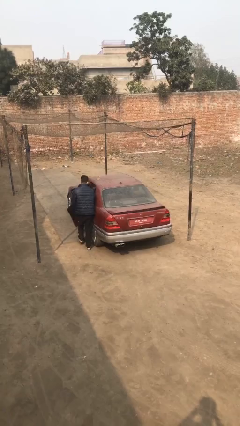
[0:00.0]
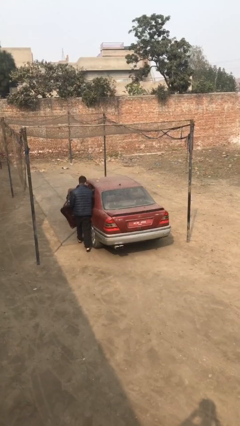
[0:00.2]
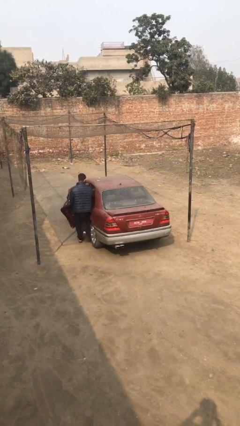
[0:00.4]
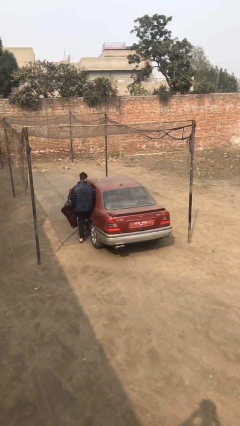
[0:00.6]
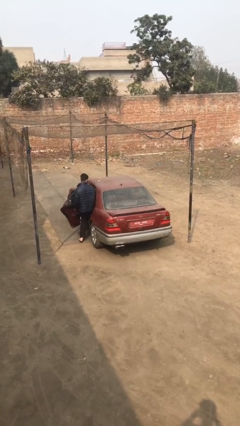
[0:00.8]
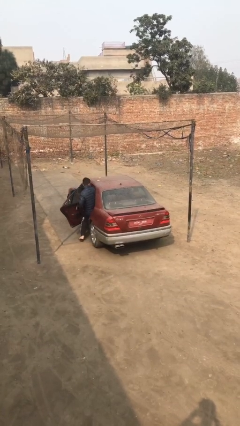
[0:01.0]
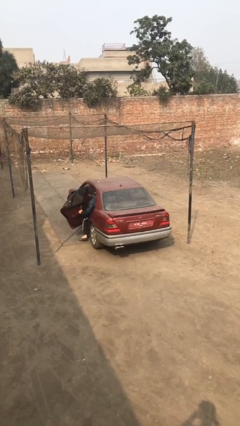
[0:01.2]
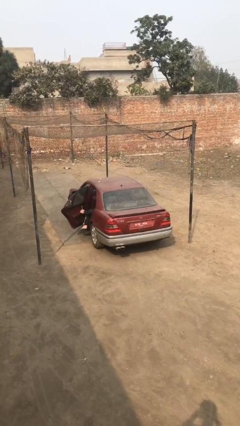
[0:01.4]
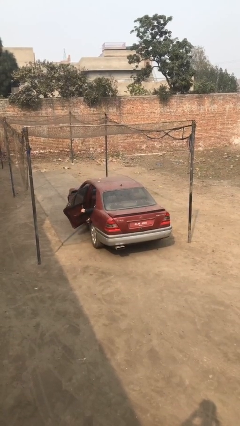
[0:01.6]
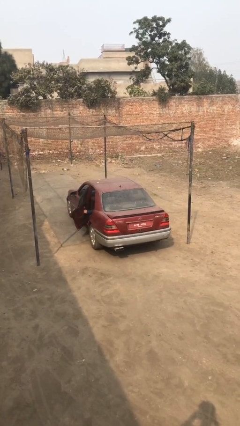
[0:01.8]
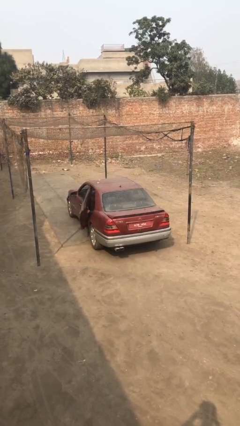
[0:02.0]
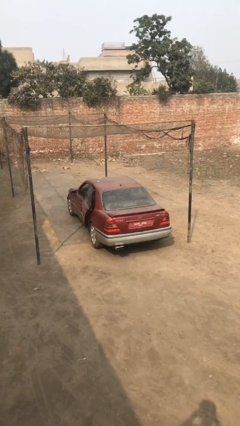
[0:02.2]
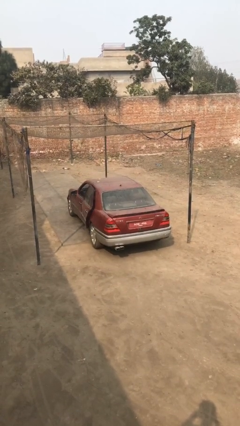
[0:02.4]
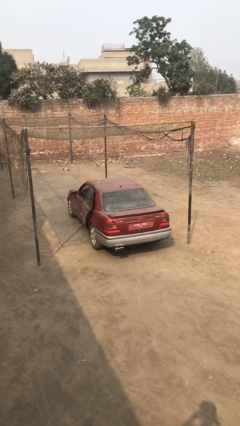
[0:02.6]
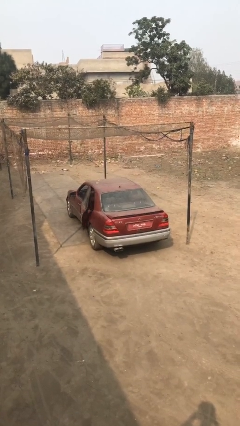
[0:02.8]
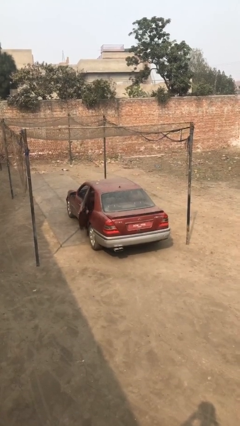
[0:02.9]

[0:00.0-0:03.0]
car picks up person

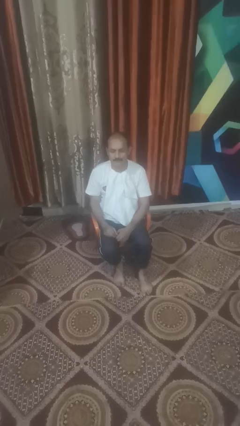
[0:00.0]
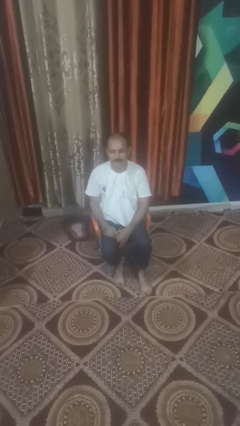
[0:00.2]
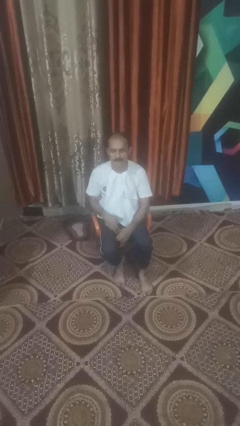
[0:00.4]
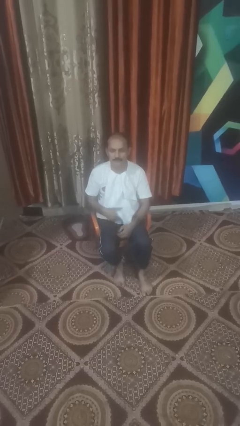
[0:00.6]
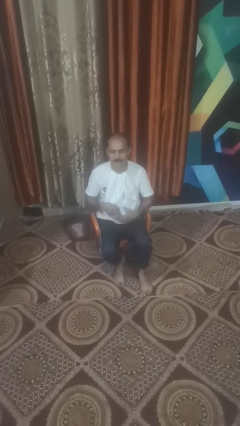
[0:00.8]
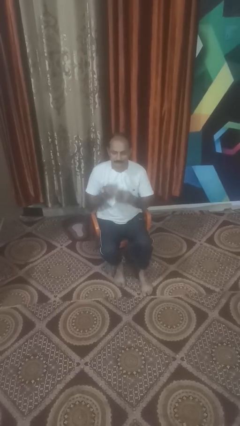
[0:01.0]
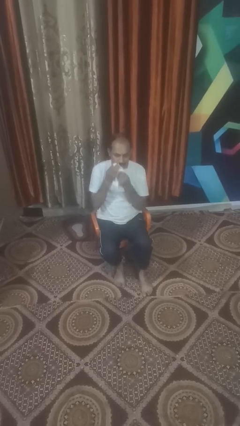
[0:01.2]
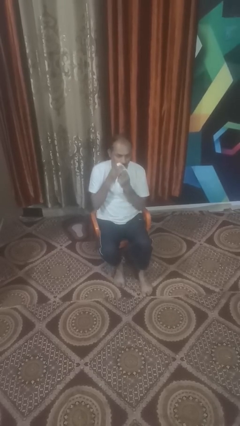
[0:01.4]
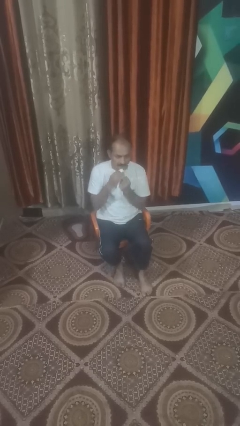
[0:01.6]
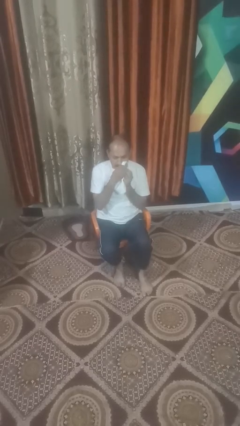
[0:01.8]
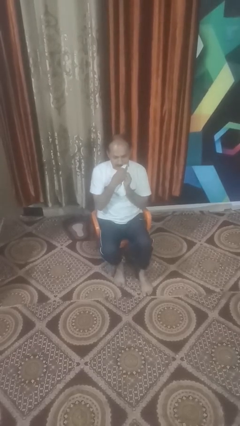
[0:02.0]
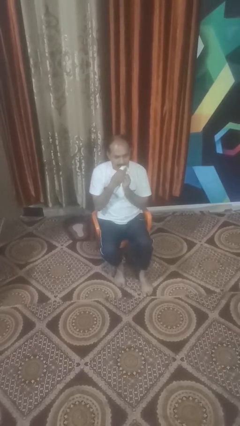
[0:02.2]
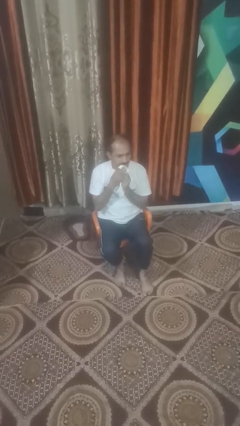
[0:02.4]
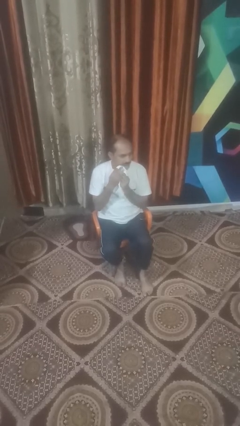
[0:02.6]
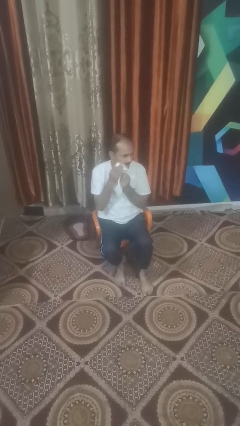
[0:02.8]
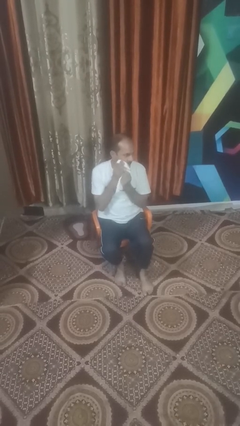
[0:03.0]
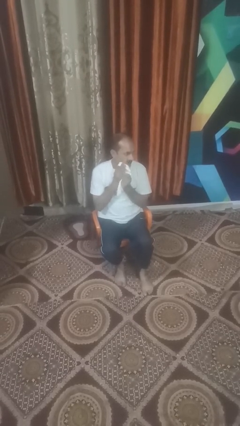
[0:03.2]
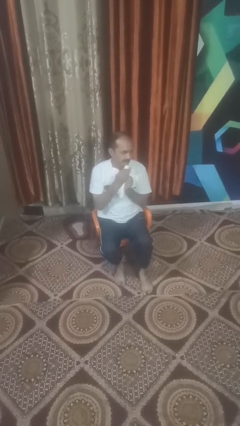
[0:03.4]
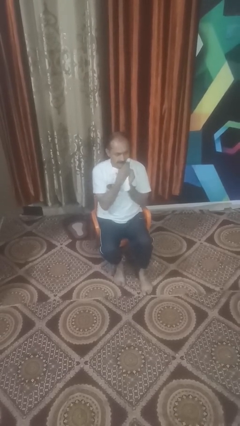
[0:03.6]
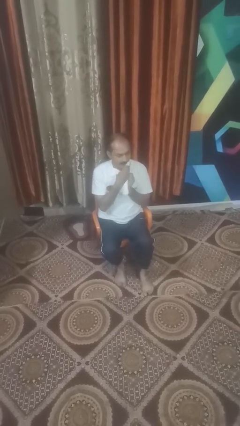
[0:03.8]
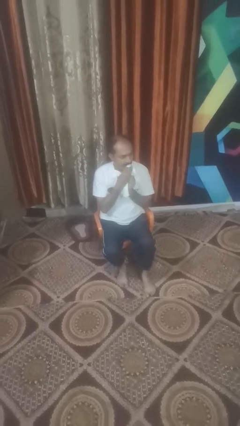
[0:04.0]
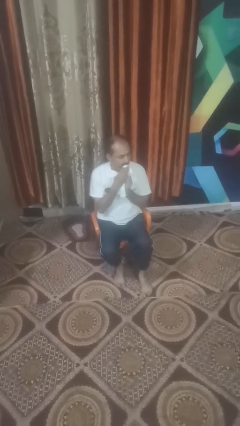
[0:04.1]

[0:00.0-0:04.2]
person wipes mouth with napkin

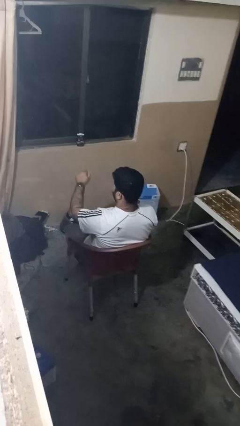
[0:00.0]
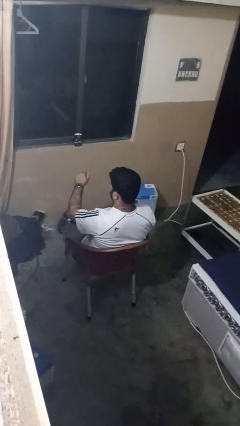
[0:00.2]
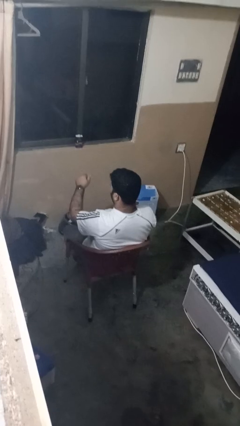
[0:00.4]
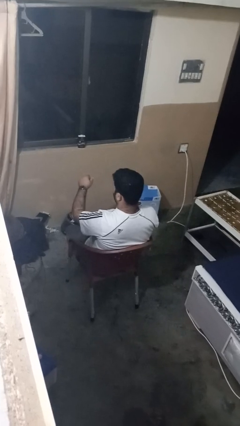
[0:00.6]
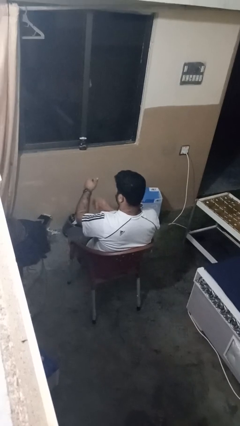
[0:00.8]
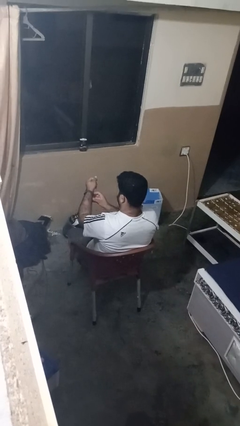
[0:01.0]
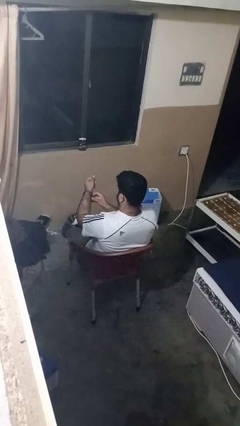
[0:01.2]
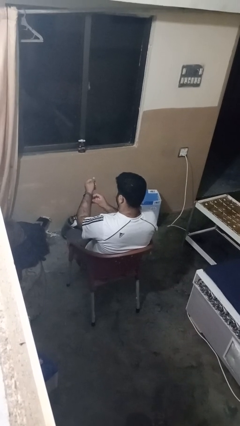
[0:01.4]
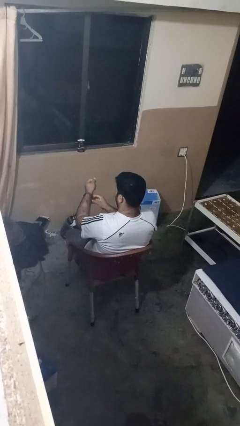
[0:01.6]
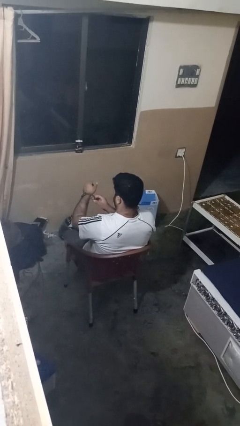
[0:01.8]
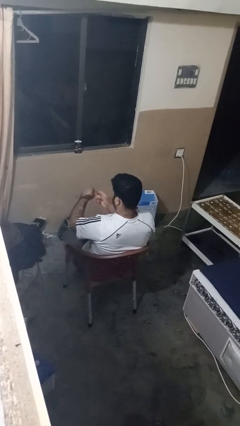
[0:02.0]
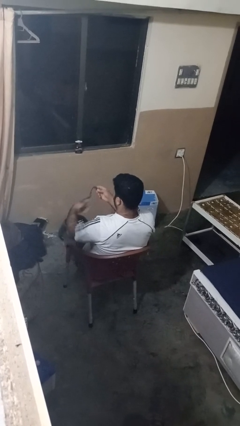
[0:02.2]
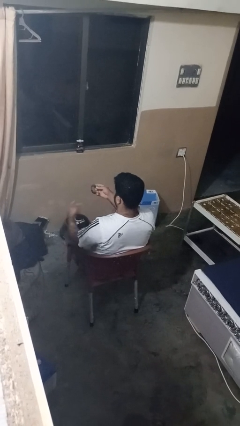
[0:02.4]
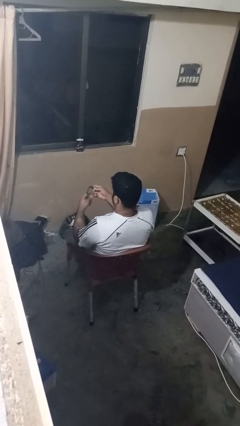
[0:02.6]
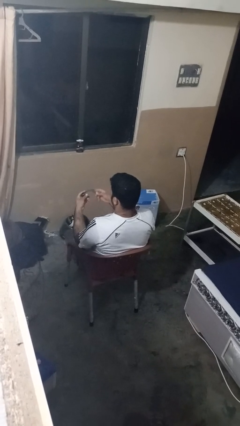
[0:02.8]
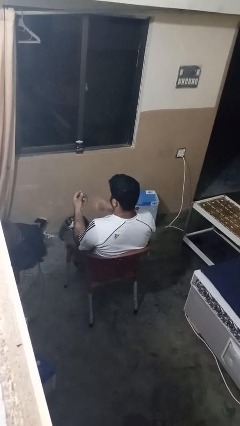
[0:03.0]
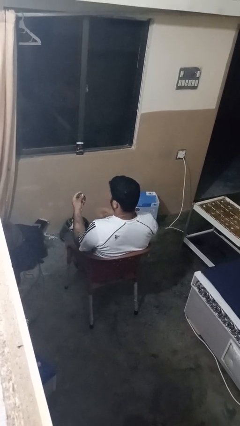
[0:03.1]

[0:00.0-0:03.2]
person takes off wristwatch

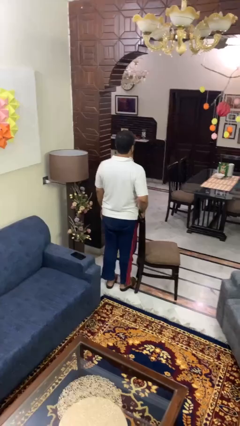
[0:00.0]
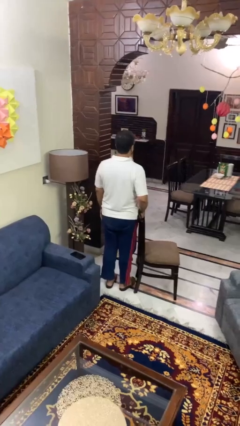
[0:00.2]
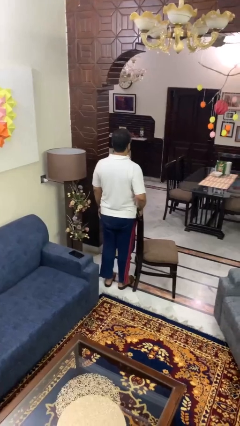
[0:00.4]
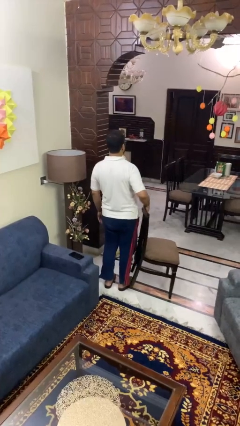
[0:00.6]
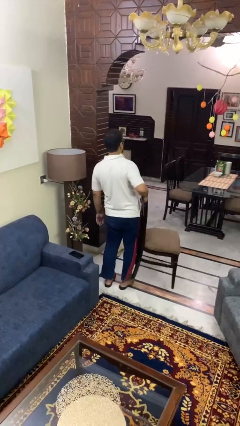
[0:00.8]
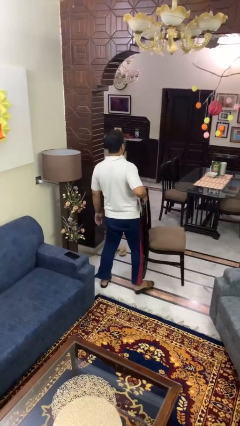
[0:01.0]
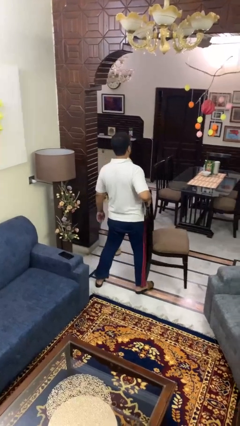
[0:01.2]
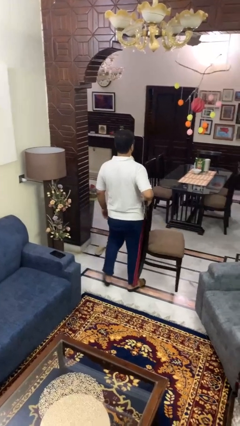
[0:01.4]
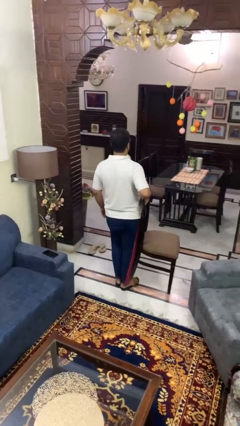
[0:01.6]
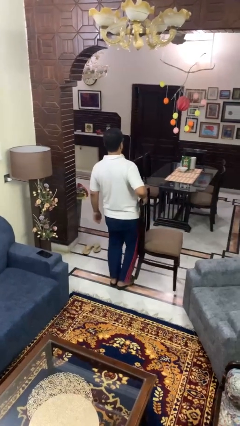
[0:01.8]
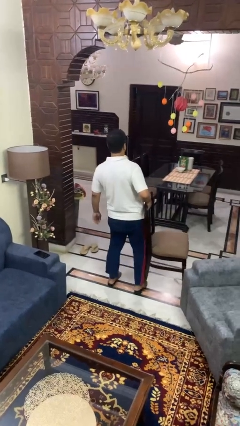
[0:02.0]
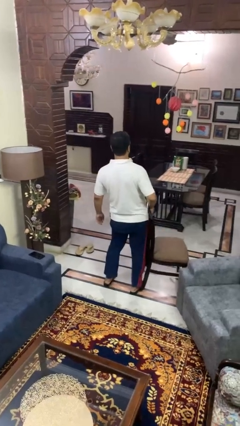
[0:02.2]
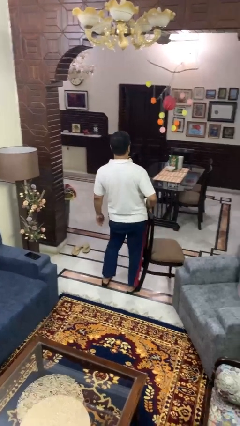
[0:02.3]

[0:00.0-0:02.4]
person carries furniture

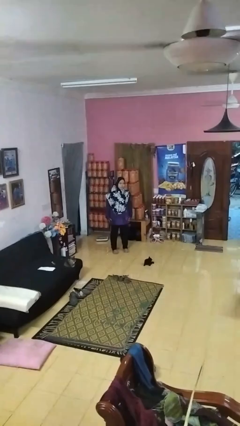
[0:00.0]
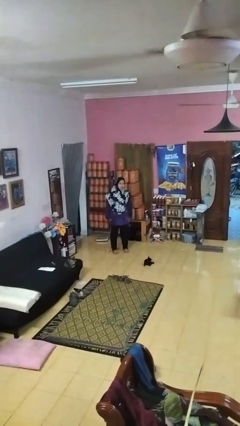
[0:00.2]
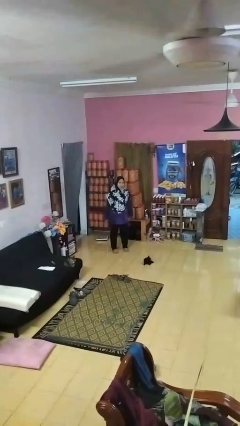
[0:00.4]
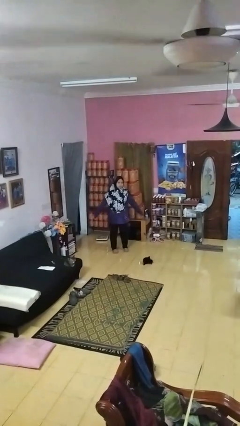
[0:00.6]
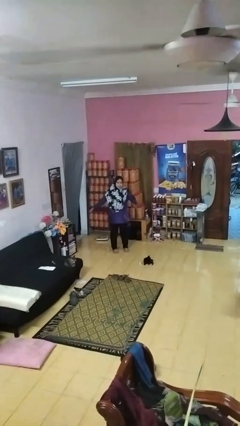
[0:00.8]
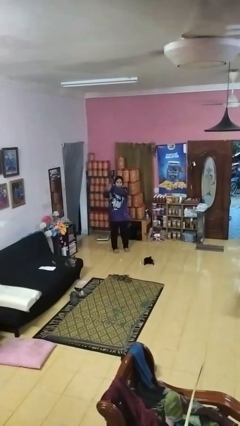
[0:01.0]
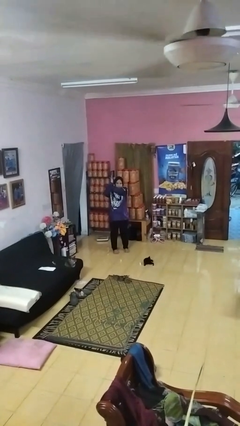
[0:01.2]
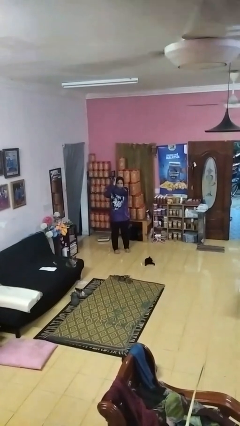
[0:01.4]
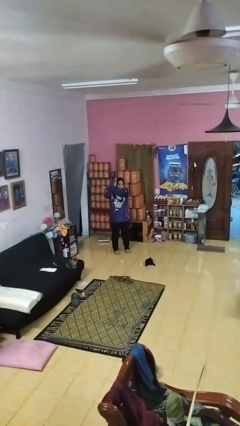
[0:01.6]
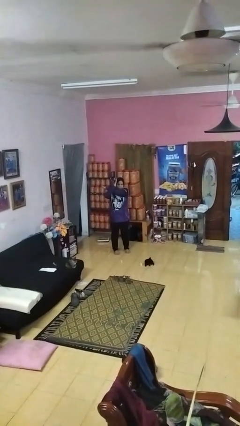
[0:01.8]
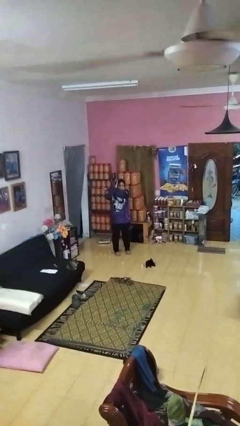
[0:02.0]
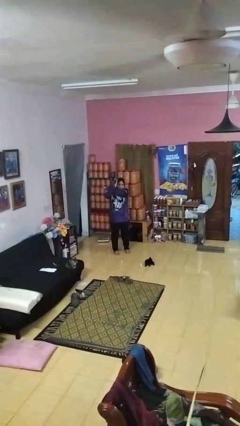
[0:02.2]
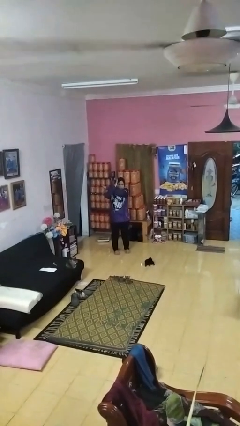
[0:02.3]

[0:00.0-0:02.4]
person gestures arms x

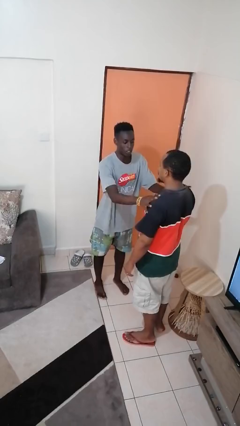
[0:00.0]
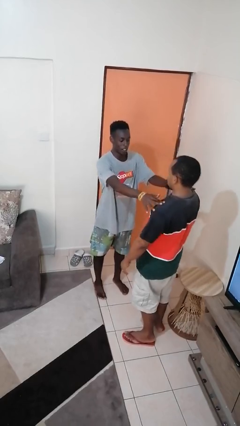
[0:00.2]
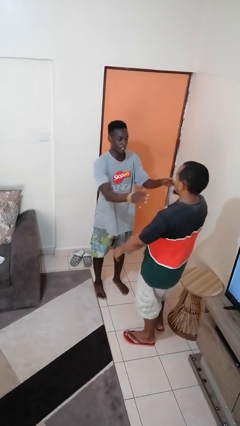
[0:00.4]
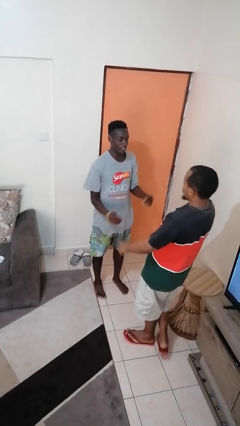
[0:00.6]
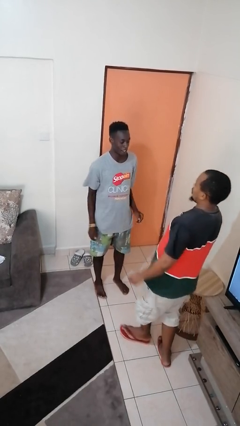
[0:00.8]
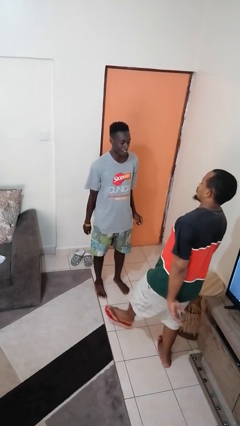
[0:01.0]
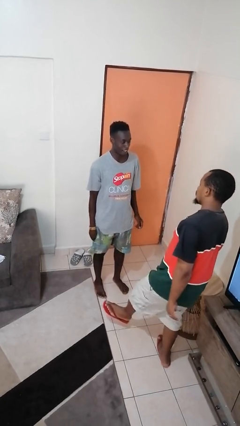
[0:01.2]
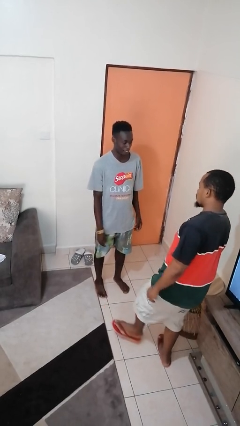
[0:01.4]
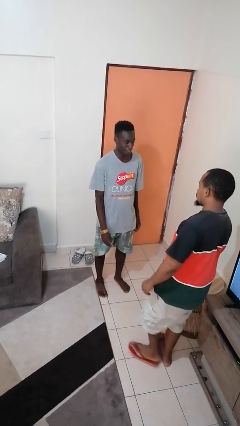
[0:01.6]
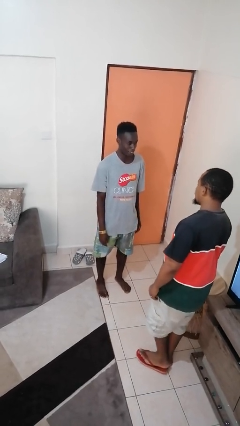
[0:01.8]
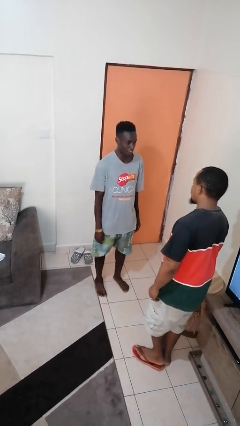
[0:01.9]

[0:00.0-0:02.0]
person shoves person
